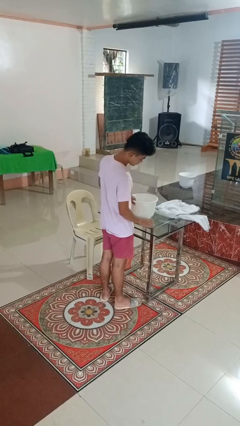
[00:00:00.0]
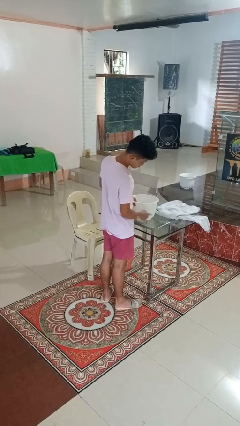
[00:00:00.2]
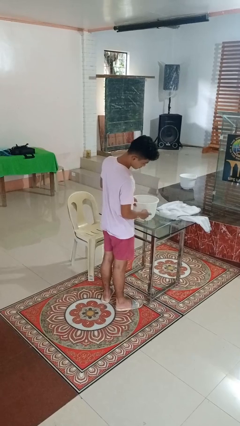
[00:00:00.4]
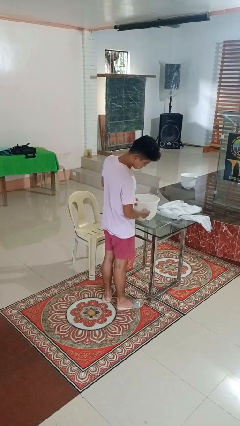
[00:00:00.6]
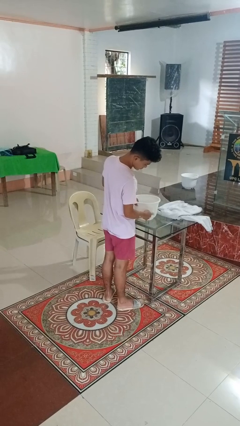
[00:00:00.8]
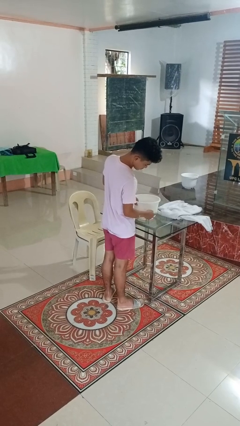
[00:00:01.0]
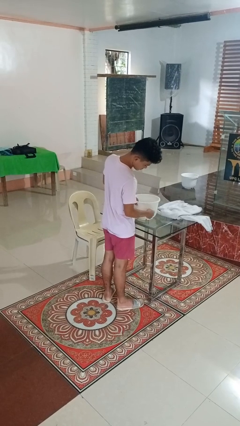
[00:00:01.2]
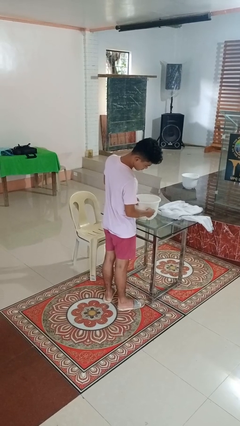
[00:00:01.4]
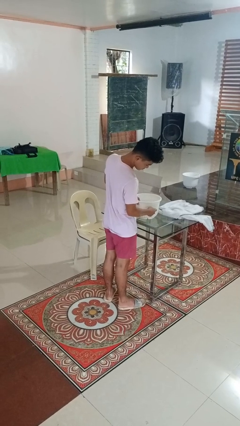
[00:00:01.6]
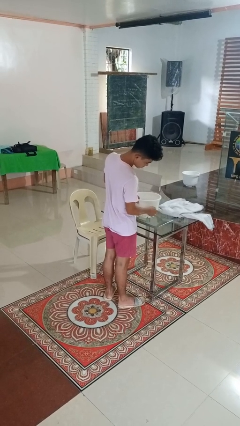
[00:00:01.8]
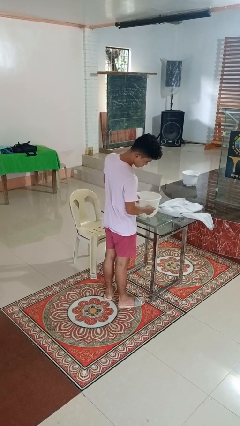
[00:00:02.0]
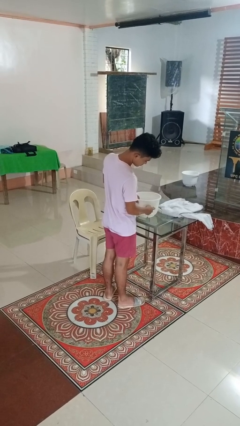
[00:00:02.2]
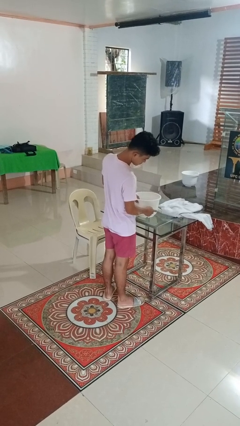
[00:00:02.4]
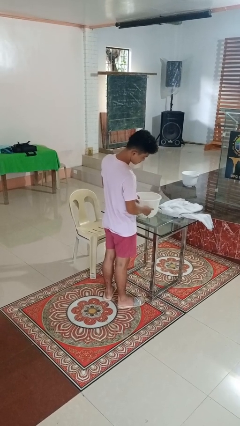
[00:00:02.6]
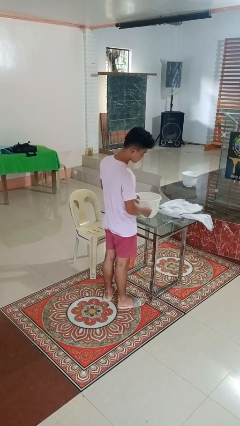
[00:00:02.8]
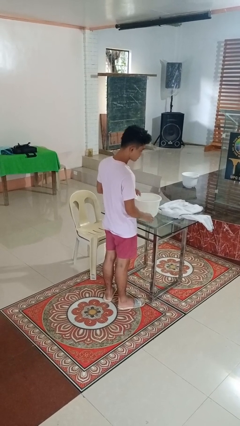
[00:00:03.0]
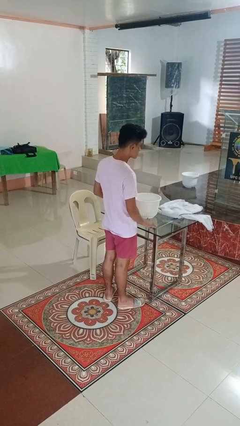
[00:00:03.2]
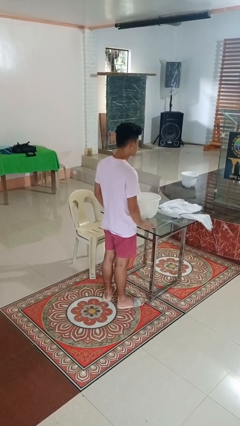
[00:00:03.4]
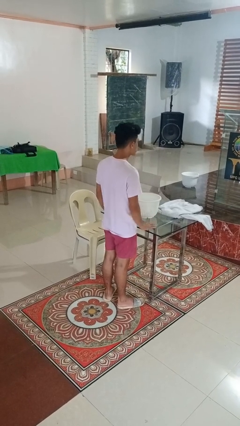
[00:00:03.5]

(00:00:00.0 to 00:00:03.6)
person taps object with finger

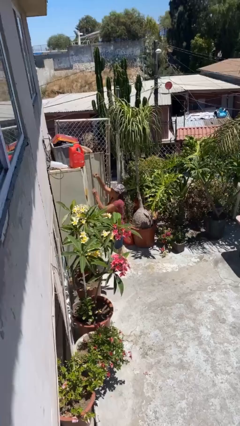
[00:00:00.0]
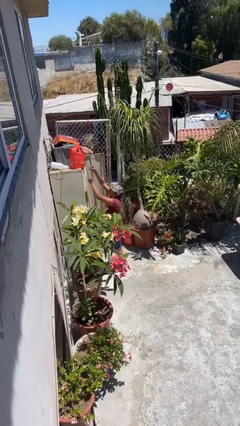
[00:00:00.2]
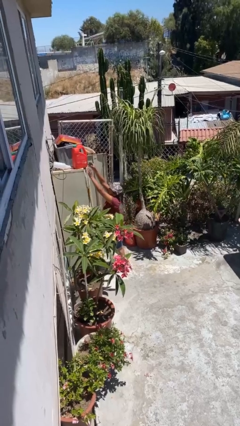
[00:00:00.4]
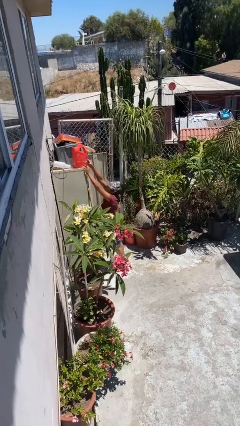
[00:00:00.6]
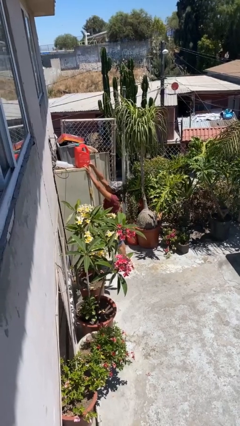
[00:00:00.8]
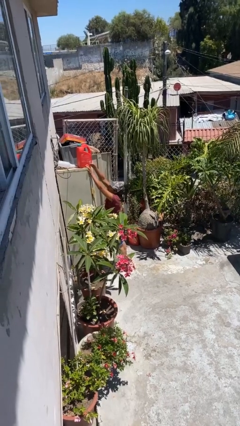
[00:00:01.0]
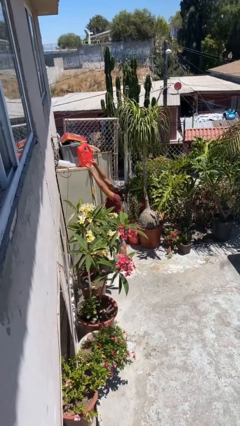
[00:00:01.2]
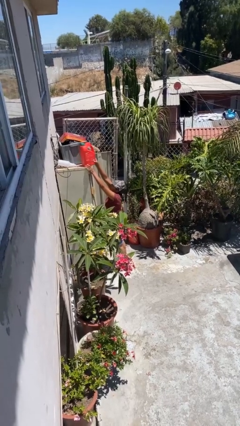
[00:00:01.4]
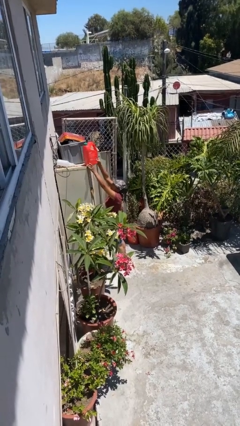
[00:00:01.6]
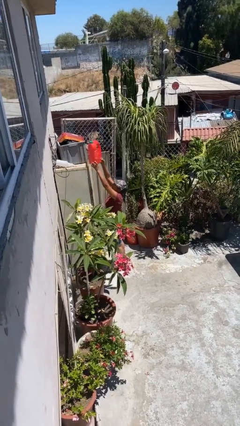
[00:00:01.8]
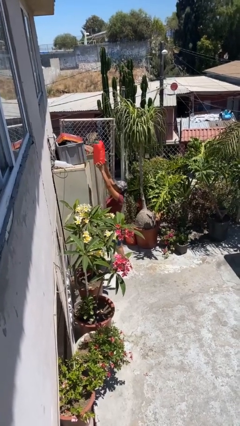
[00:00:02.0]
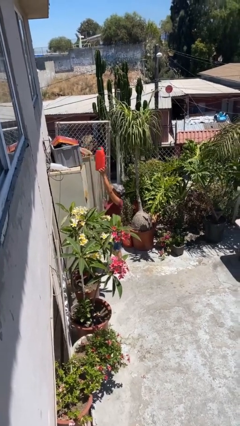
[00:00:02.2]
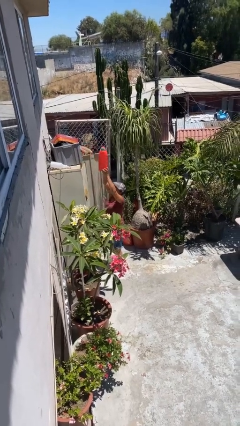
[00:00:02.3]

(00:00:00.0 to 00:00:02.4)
person picks up object from shelf

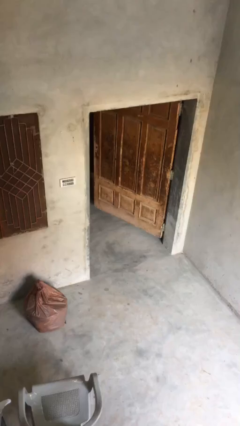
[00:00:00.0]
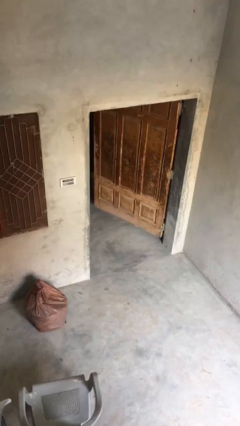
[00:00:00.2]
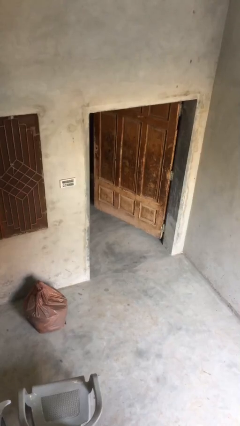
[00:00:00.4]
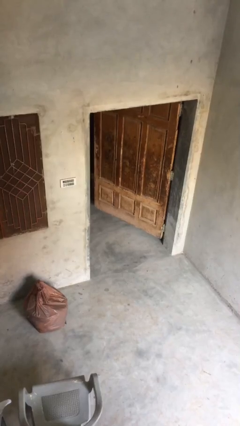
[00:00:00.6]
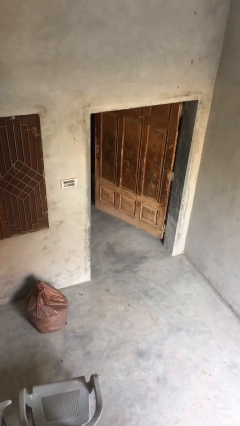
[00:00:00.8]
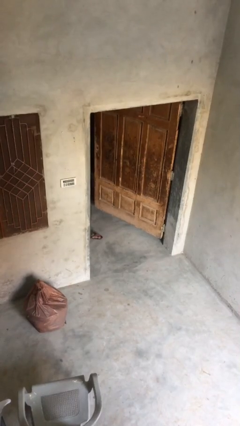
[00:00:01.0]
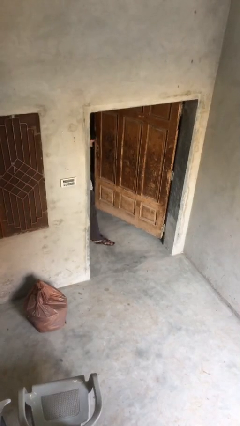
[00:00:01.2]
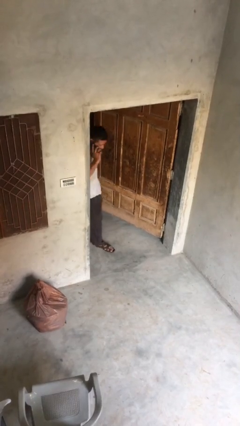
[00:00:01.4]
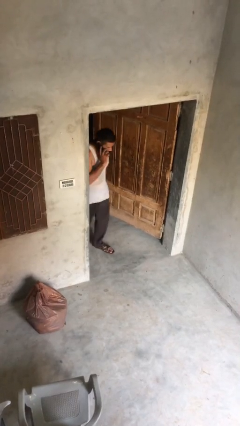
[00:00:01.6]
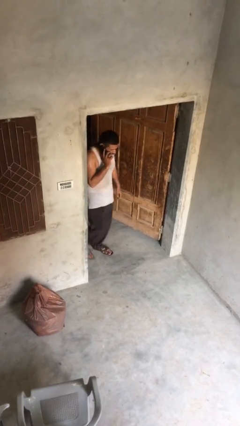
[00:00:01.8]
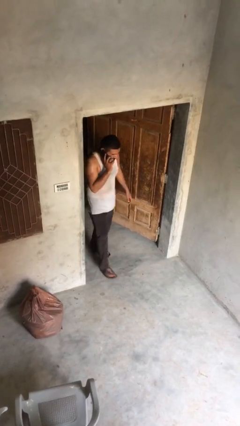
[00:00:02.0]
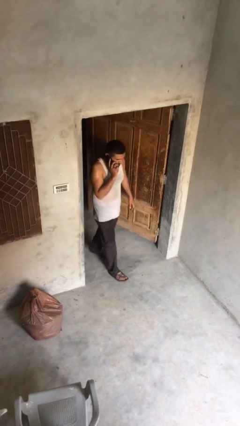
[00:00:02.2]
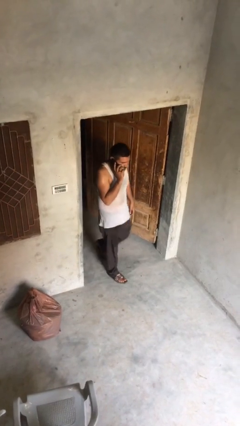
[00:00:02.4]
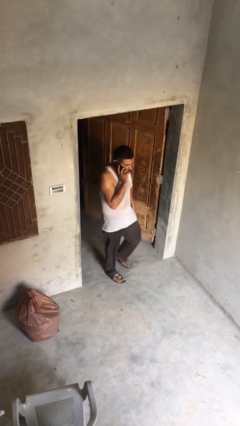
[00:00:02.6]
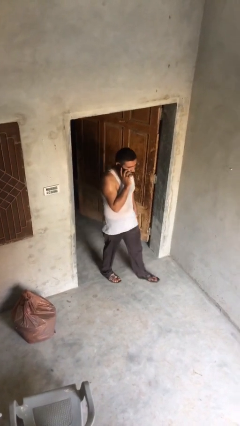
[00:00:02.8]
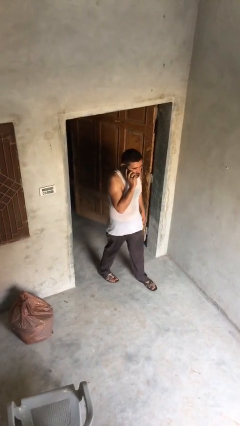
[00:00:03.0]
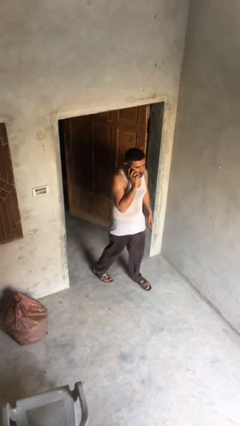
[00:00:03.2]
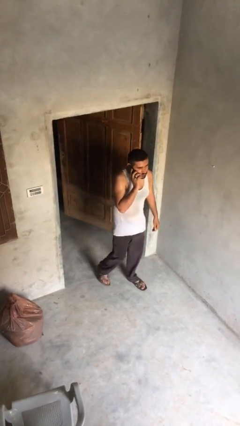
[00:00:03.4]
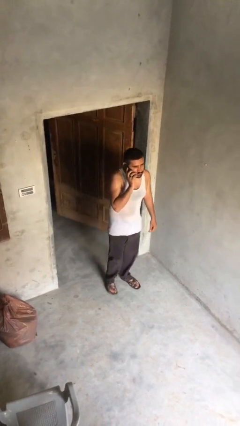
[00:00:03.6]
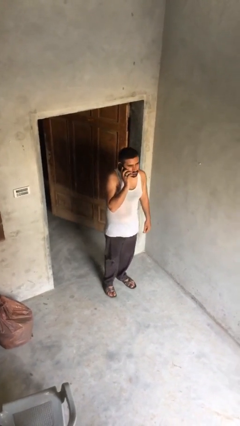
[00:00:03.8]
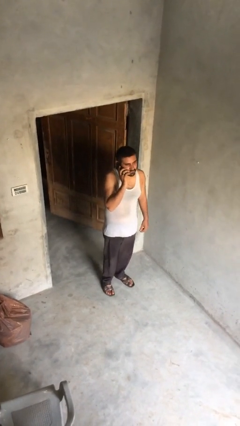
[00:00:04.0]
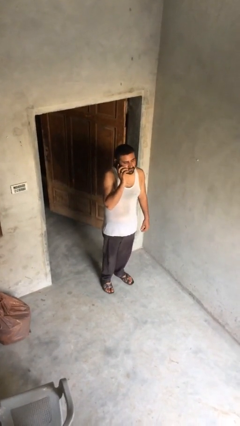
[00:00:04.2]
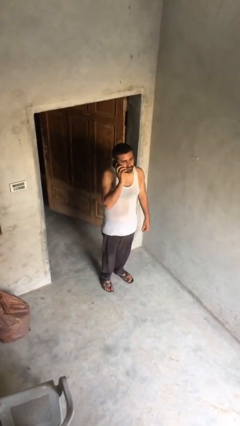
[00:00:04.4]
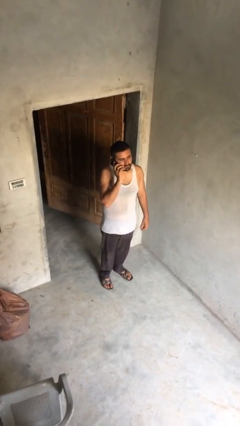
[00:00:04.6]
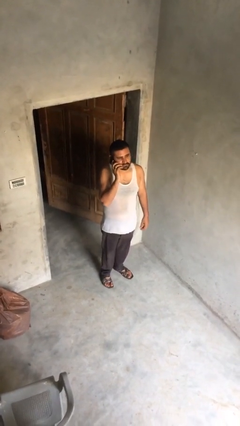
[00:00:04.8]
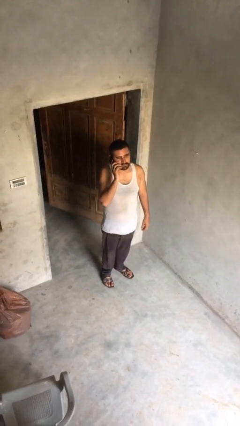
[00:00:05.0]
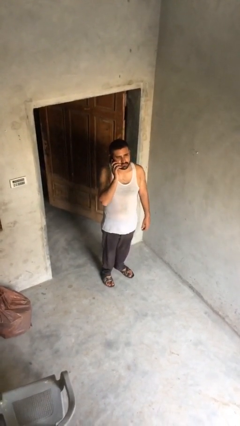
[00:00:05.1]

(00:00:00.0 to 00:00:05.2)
person enters scene through structure

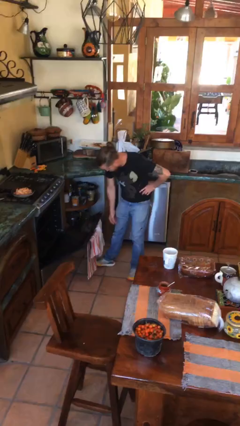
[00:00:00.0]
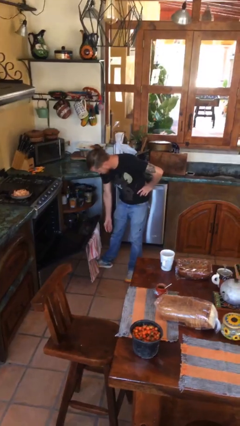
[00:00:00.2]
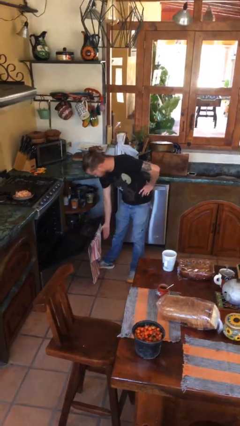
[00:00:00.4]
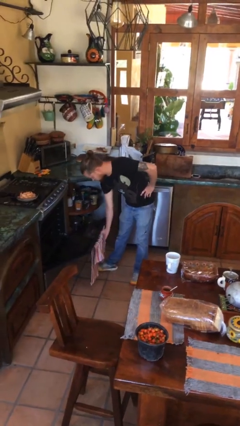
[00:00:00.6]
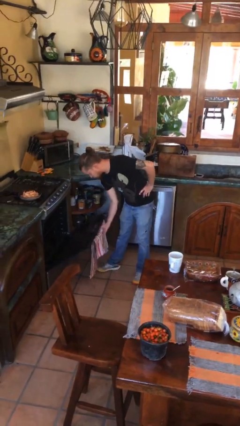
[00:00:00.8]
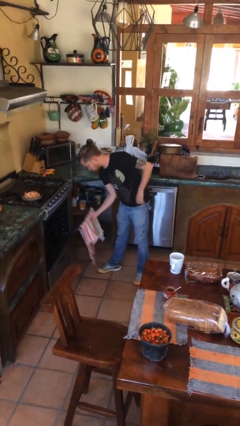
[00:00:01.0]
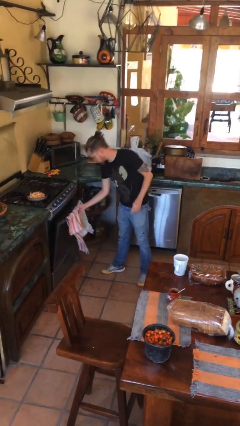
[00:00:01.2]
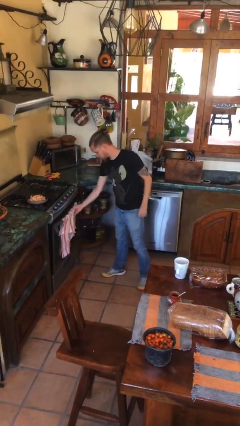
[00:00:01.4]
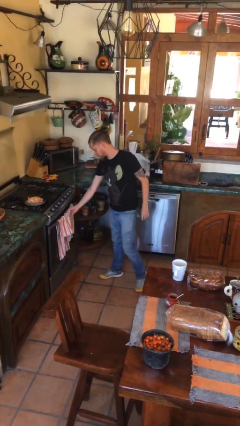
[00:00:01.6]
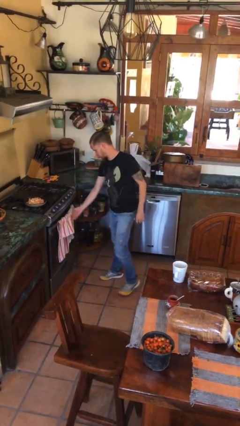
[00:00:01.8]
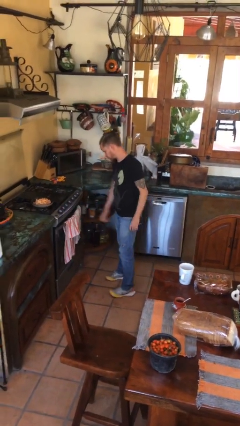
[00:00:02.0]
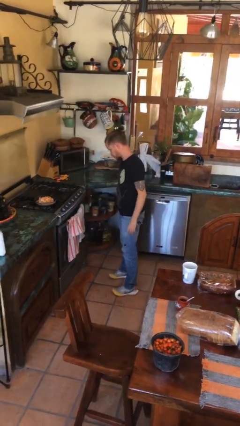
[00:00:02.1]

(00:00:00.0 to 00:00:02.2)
person closes oven door

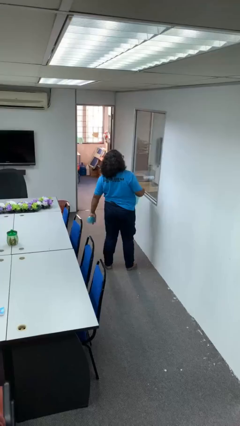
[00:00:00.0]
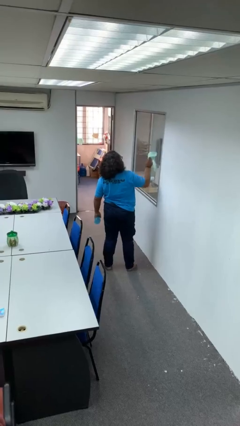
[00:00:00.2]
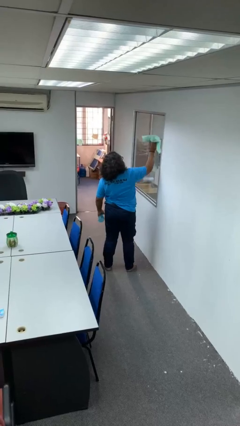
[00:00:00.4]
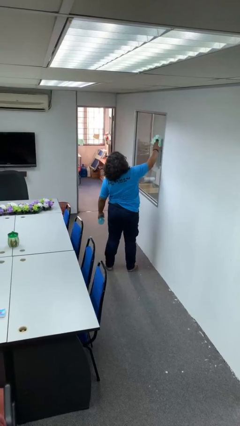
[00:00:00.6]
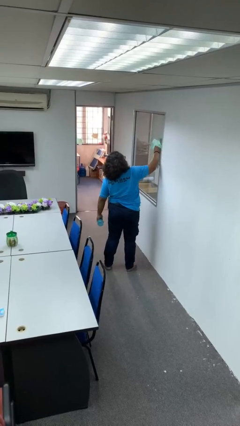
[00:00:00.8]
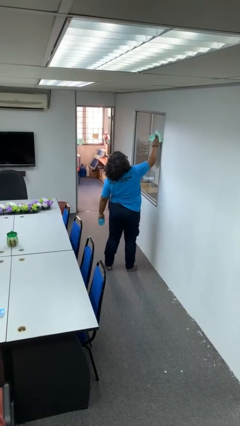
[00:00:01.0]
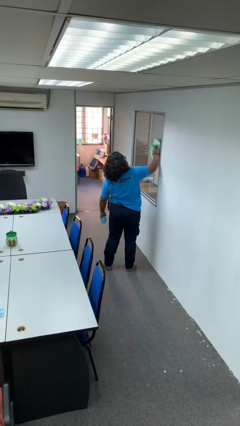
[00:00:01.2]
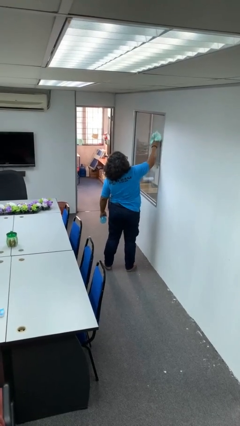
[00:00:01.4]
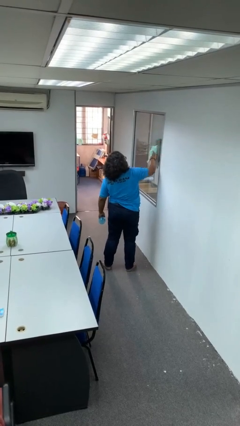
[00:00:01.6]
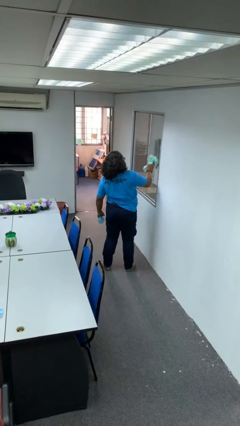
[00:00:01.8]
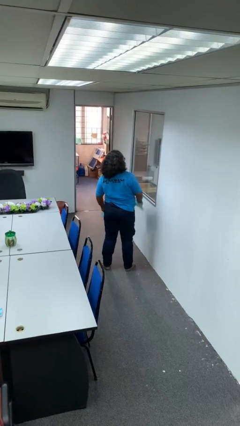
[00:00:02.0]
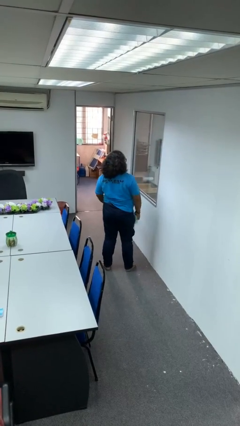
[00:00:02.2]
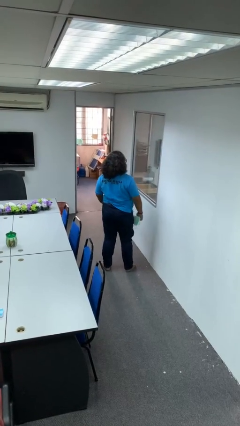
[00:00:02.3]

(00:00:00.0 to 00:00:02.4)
person washes window

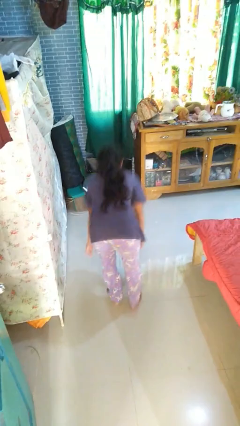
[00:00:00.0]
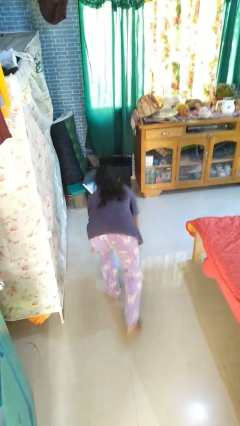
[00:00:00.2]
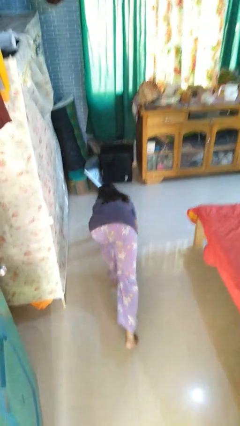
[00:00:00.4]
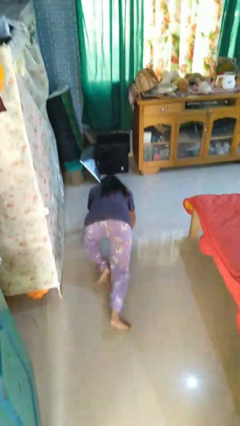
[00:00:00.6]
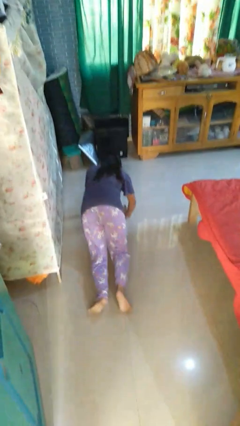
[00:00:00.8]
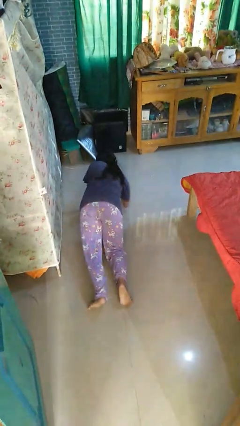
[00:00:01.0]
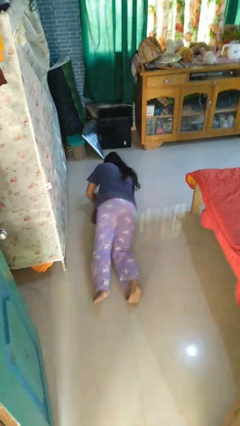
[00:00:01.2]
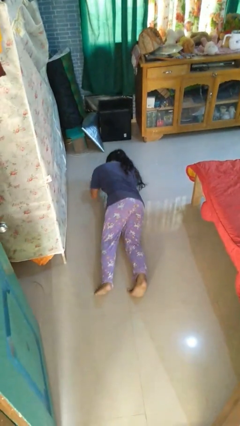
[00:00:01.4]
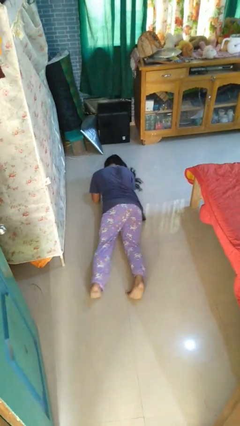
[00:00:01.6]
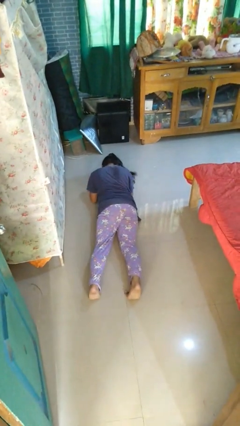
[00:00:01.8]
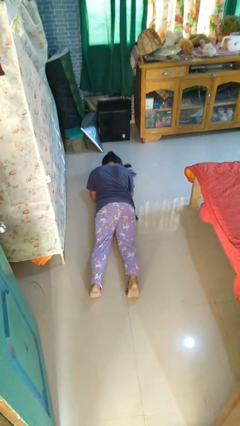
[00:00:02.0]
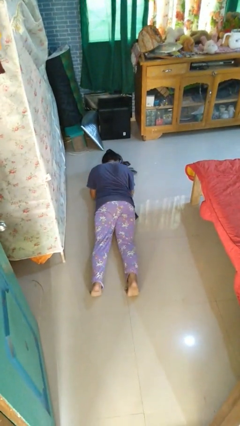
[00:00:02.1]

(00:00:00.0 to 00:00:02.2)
person exercises with plank
